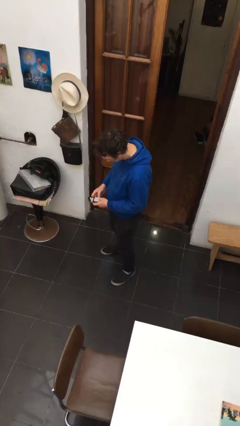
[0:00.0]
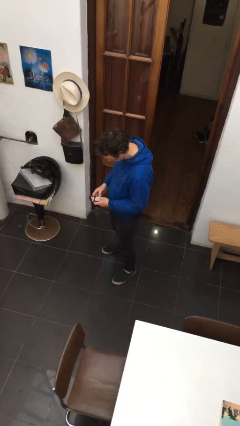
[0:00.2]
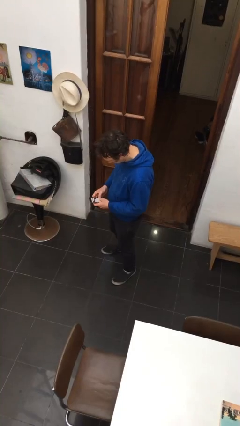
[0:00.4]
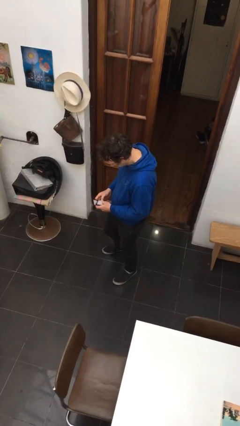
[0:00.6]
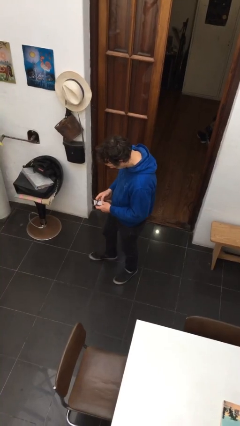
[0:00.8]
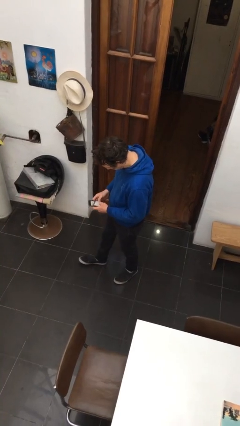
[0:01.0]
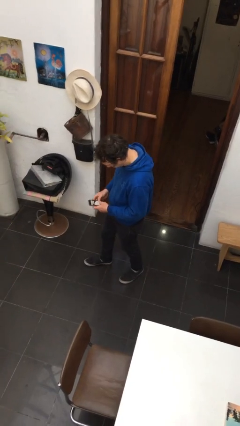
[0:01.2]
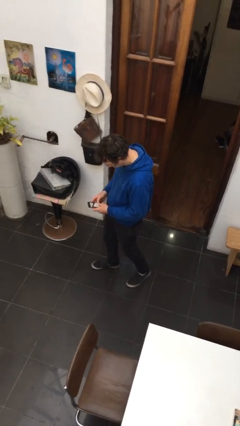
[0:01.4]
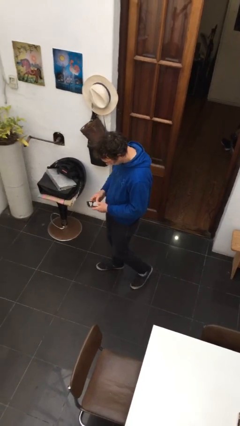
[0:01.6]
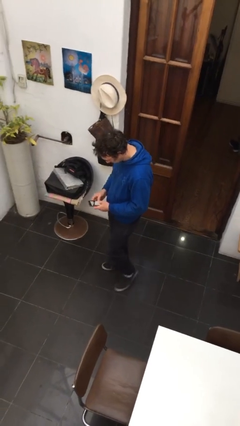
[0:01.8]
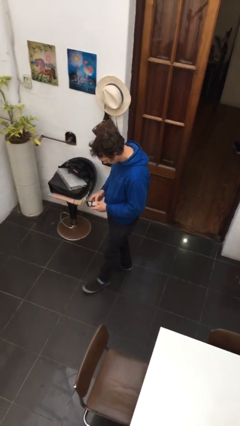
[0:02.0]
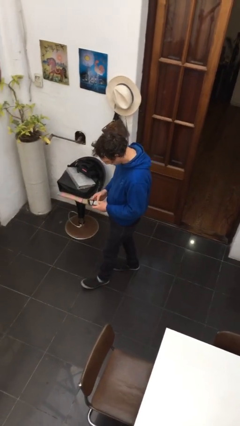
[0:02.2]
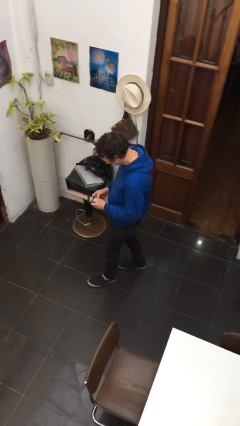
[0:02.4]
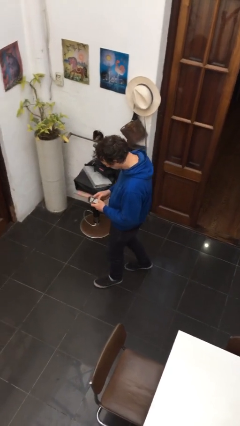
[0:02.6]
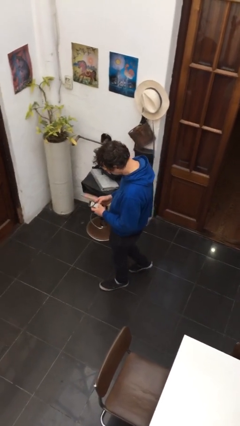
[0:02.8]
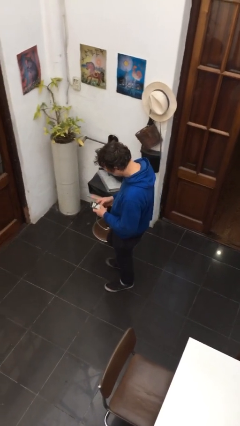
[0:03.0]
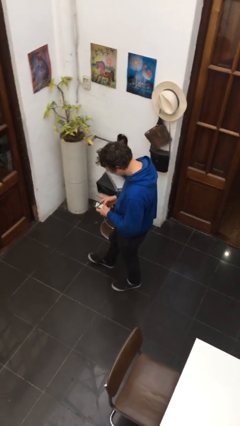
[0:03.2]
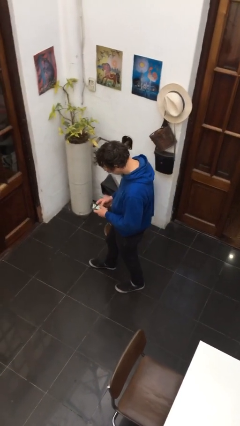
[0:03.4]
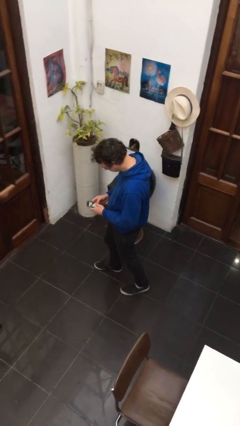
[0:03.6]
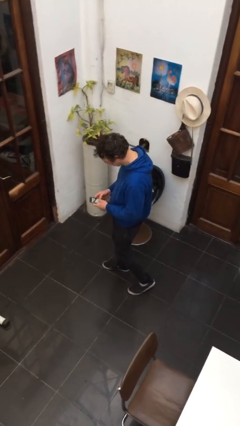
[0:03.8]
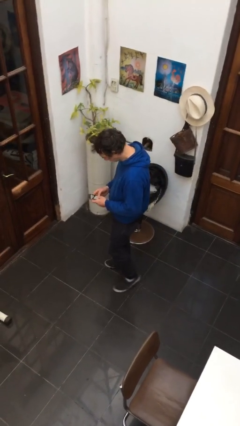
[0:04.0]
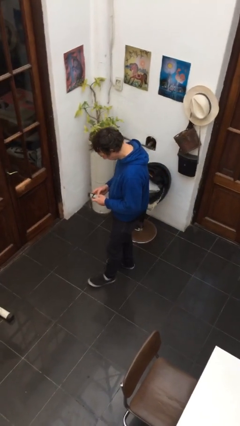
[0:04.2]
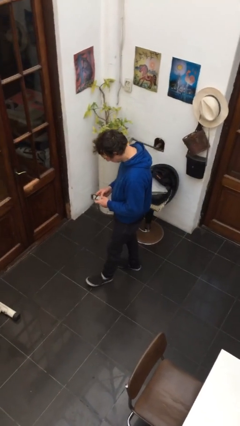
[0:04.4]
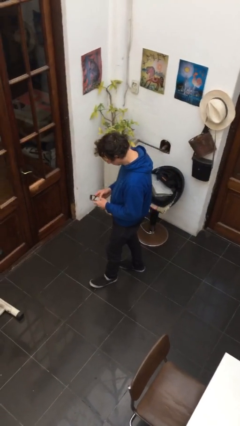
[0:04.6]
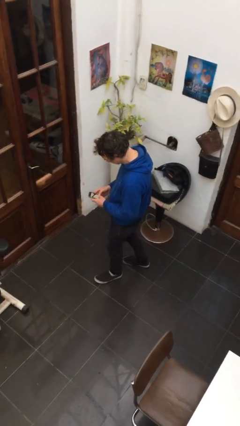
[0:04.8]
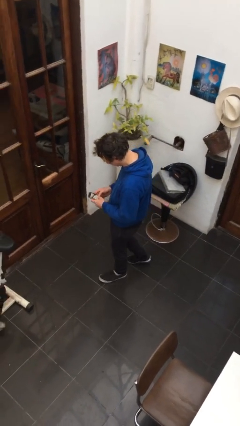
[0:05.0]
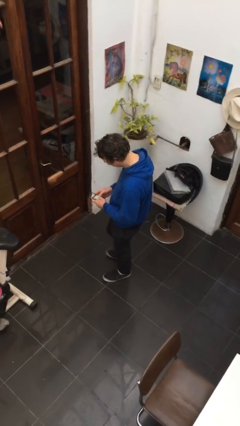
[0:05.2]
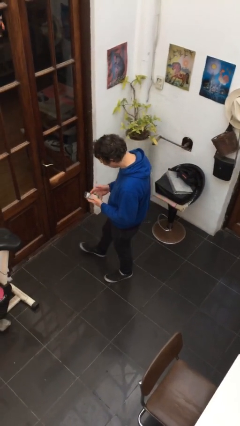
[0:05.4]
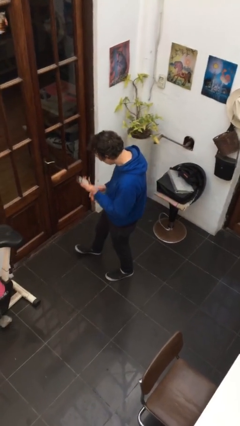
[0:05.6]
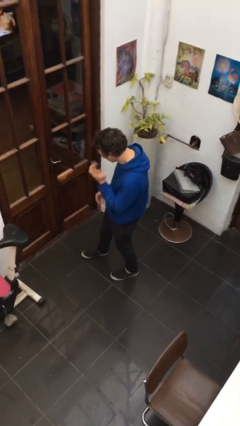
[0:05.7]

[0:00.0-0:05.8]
person texts on phone

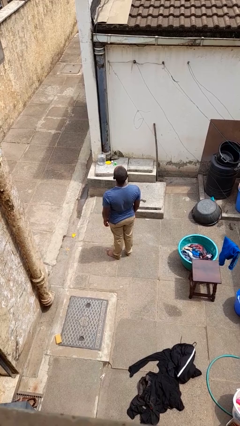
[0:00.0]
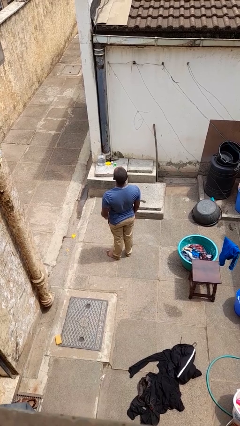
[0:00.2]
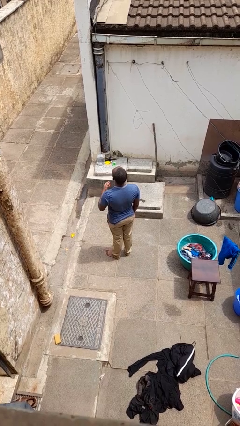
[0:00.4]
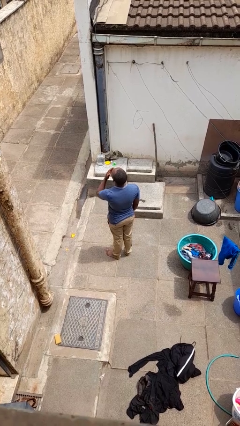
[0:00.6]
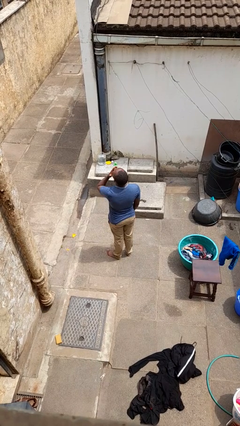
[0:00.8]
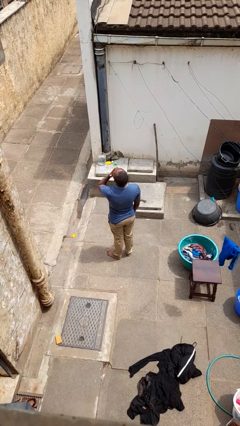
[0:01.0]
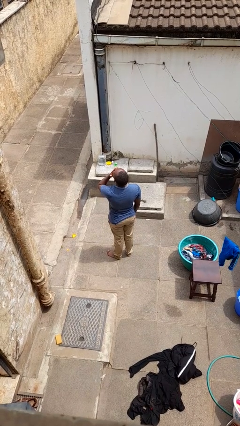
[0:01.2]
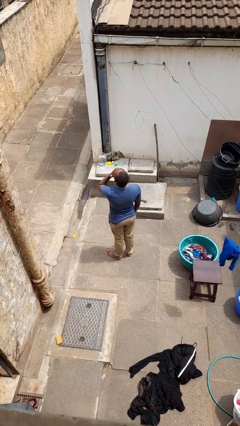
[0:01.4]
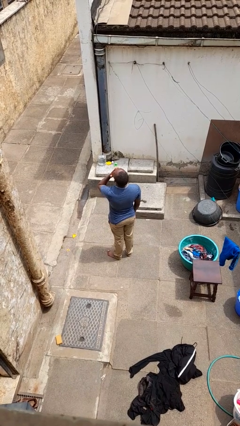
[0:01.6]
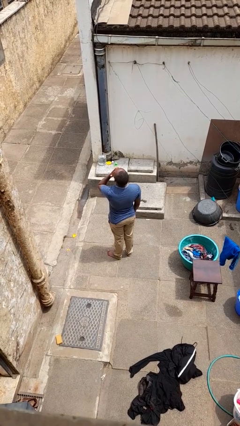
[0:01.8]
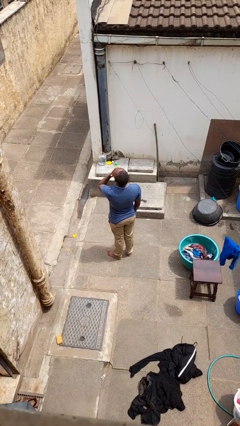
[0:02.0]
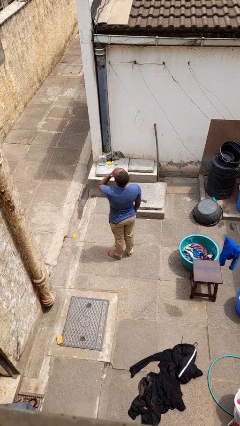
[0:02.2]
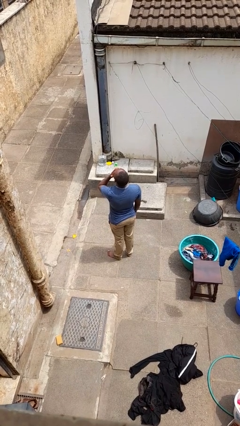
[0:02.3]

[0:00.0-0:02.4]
person yawns

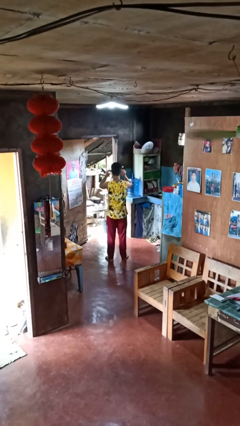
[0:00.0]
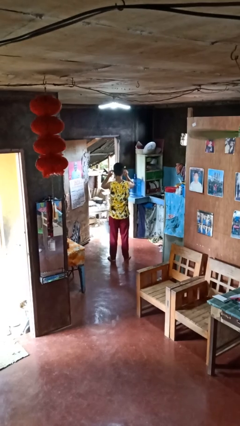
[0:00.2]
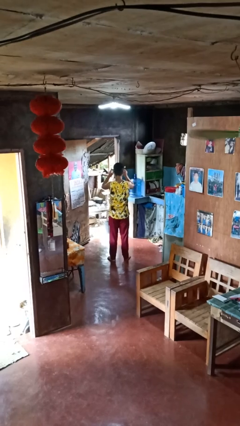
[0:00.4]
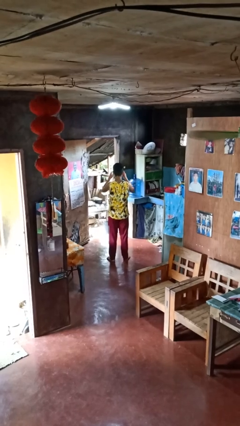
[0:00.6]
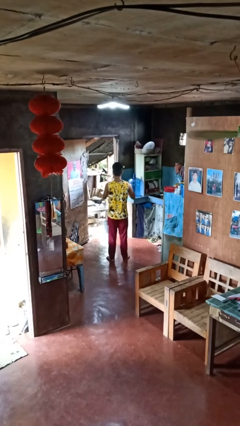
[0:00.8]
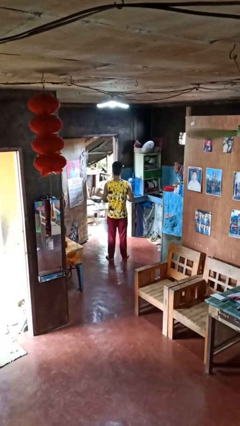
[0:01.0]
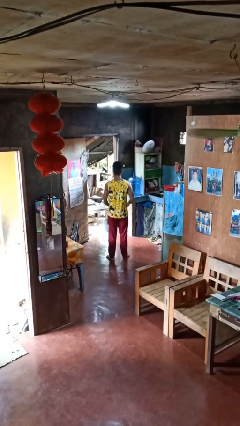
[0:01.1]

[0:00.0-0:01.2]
person takes off glasses

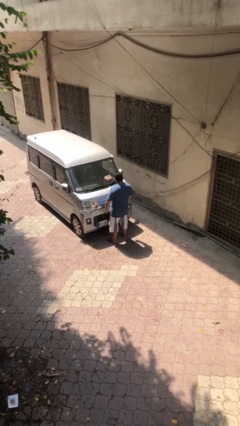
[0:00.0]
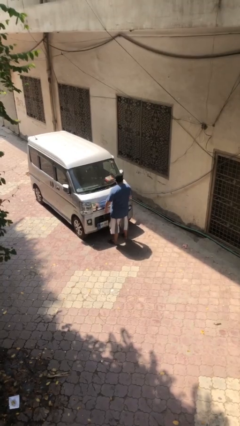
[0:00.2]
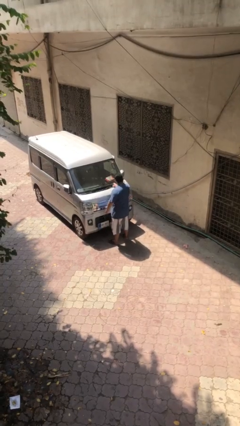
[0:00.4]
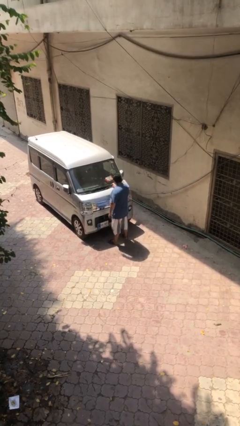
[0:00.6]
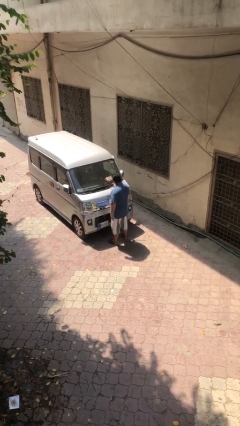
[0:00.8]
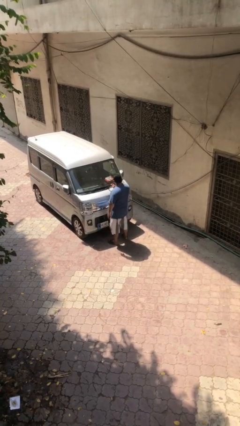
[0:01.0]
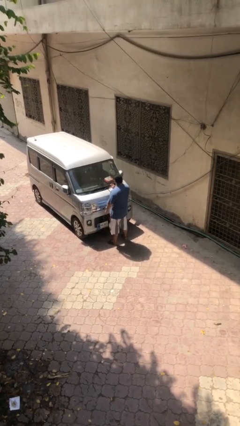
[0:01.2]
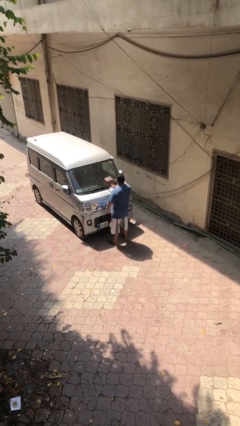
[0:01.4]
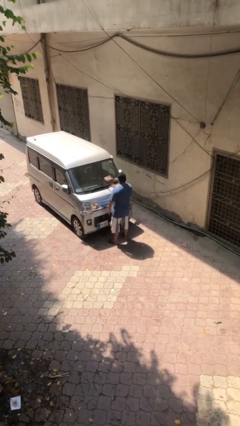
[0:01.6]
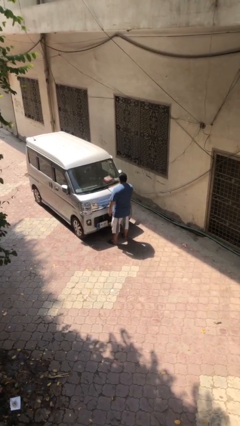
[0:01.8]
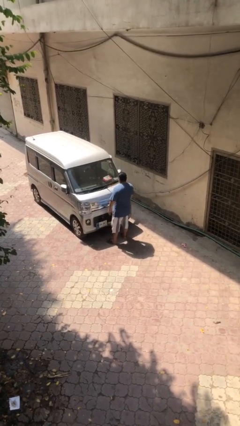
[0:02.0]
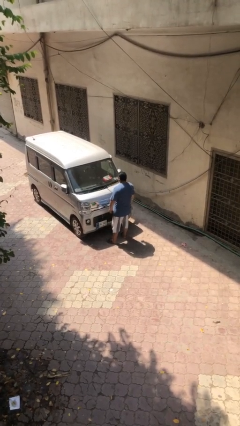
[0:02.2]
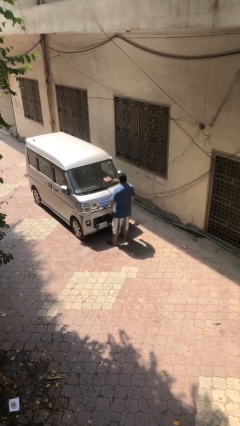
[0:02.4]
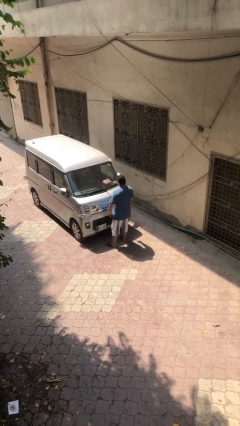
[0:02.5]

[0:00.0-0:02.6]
person flips up car wipers

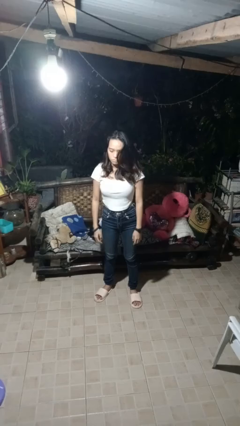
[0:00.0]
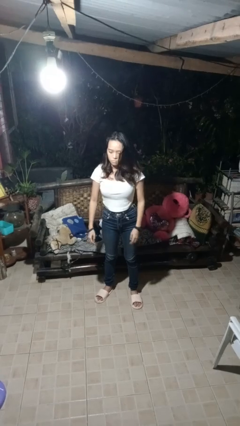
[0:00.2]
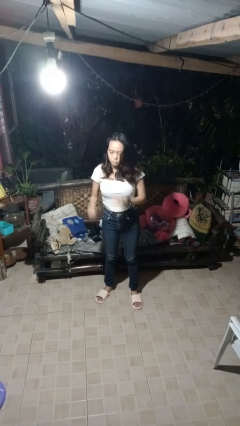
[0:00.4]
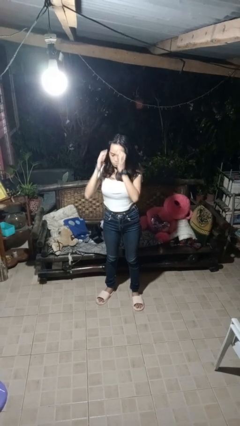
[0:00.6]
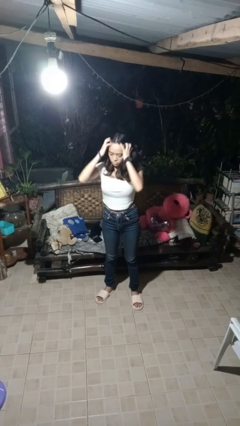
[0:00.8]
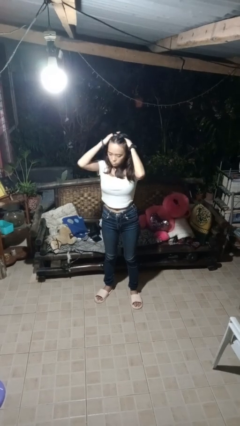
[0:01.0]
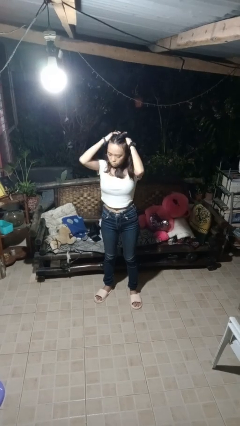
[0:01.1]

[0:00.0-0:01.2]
person strokes hair

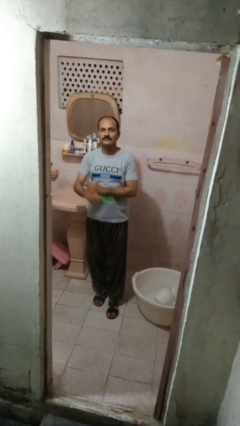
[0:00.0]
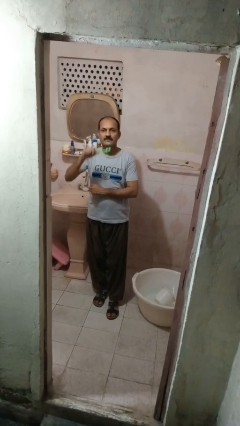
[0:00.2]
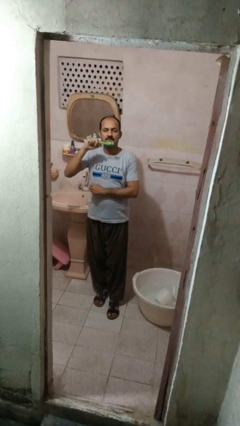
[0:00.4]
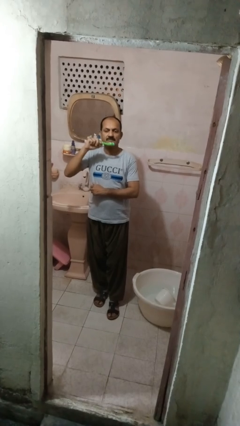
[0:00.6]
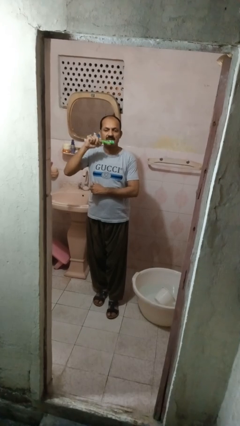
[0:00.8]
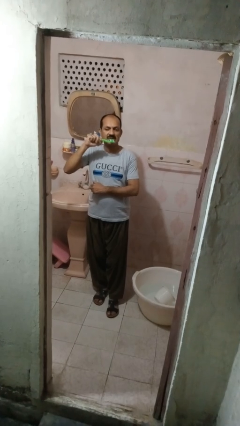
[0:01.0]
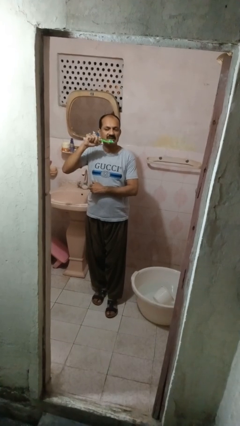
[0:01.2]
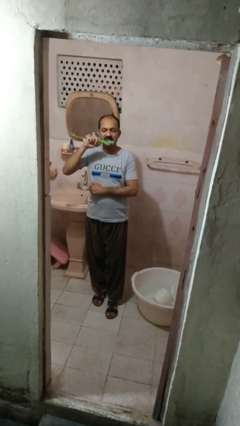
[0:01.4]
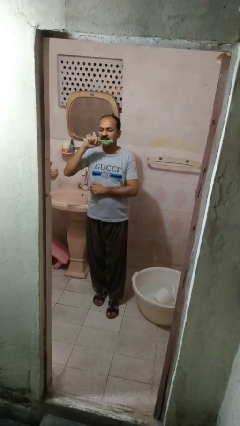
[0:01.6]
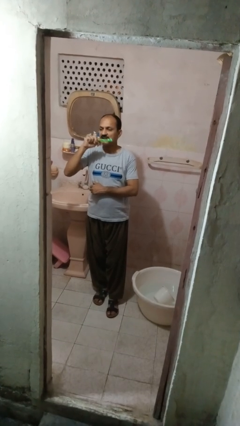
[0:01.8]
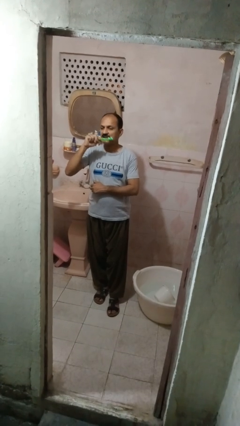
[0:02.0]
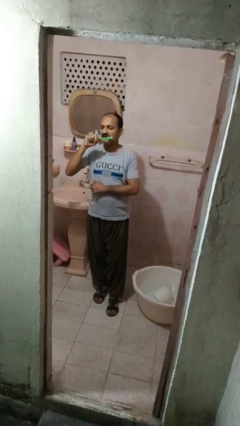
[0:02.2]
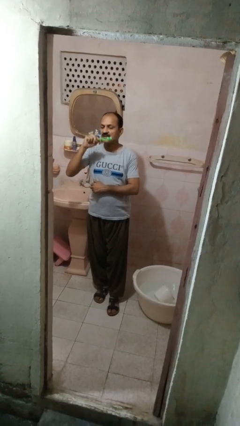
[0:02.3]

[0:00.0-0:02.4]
person brushes teeth

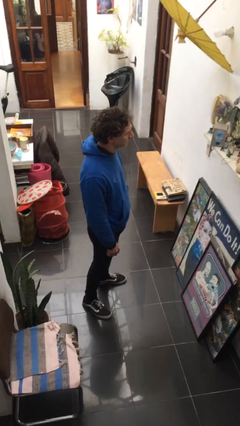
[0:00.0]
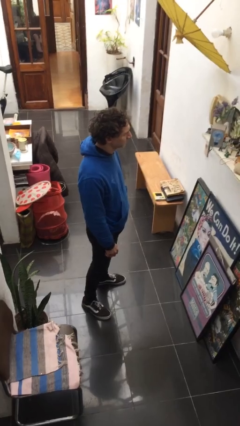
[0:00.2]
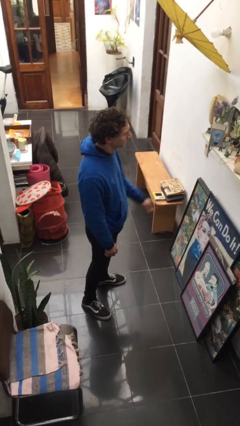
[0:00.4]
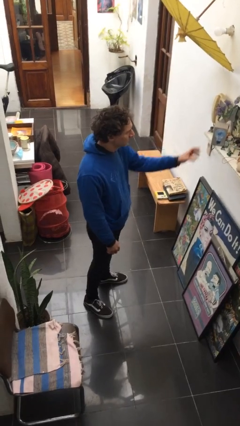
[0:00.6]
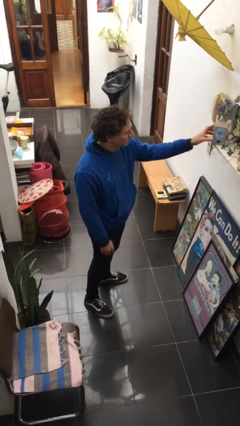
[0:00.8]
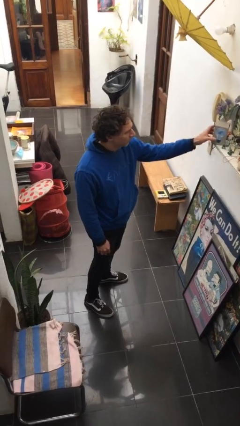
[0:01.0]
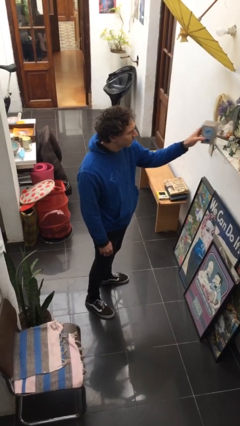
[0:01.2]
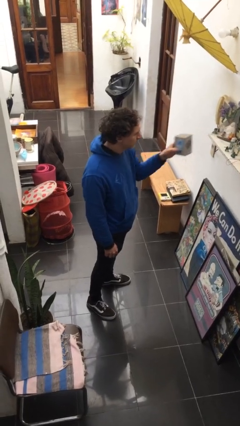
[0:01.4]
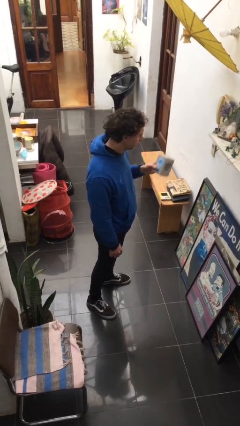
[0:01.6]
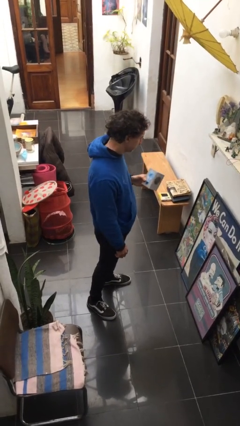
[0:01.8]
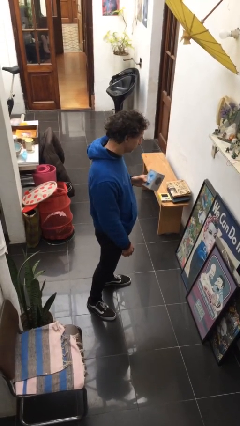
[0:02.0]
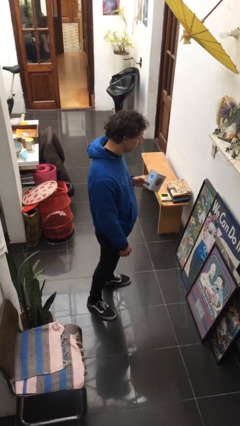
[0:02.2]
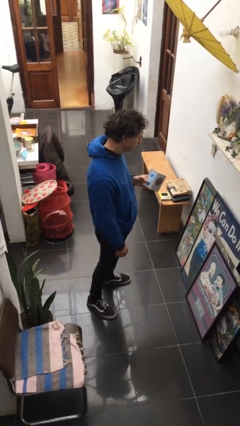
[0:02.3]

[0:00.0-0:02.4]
person picks up object from countertop
